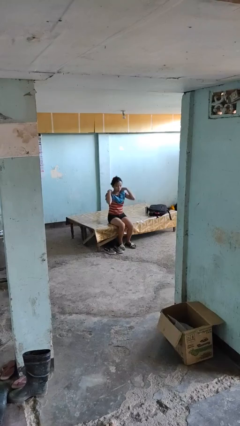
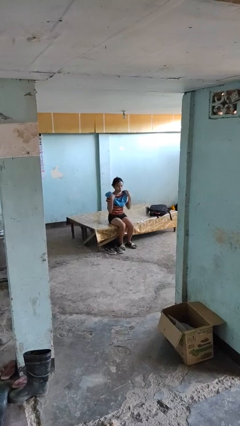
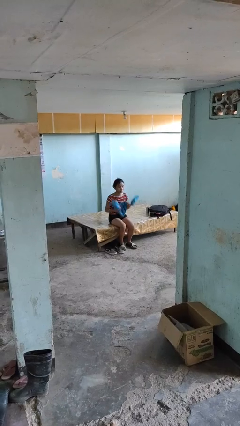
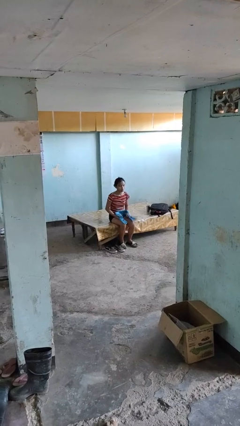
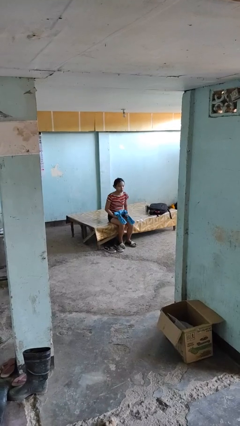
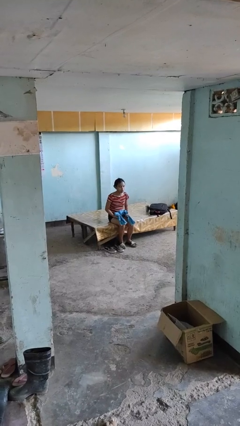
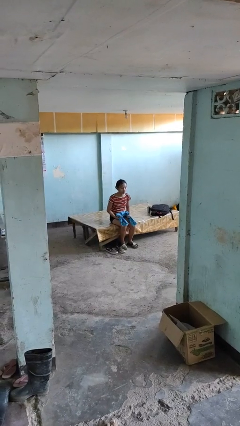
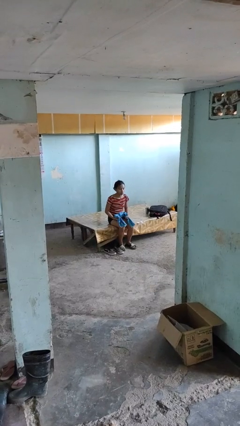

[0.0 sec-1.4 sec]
person takes off scarf

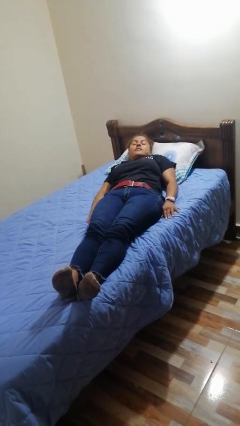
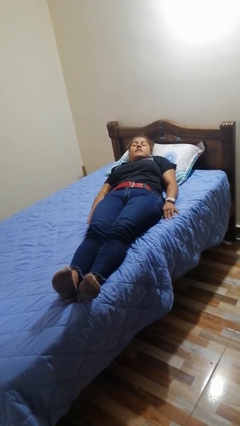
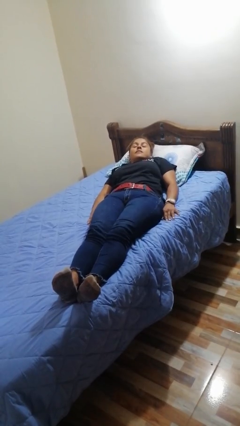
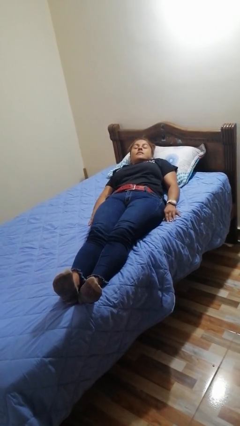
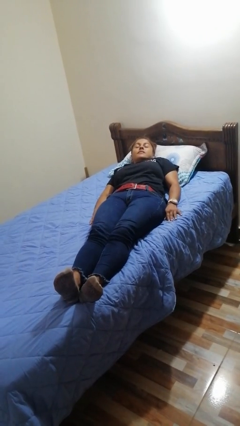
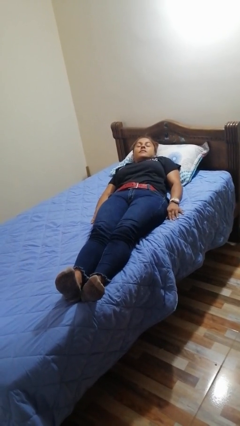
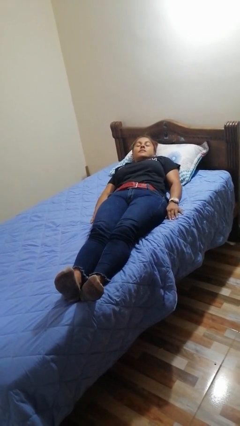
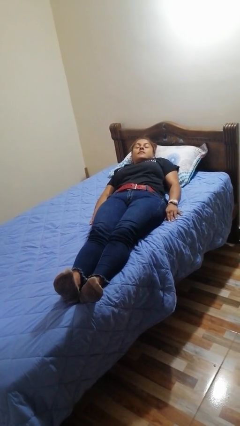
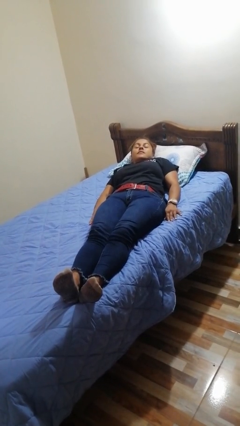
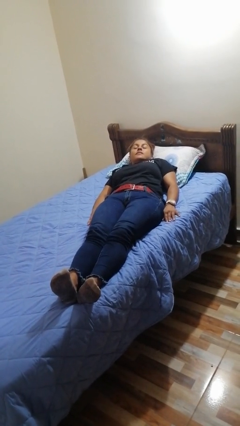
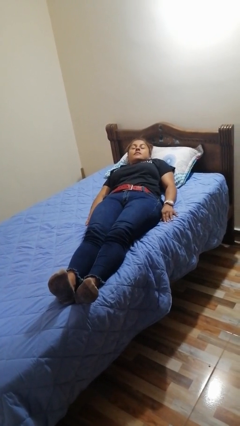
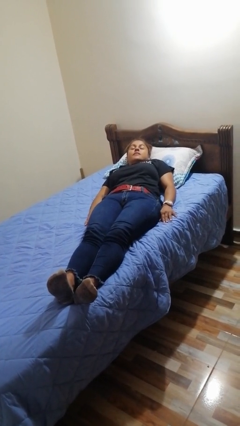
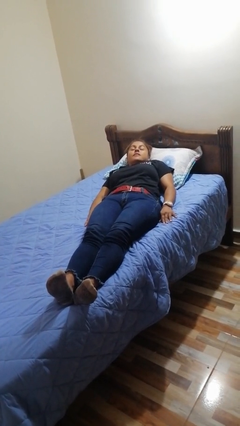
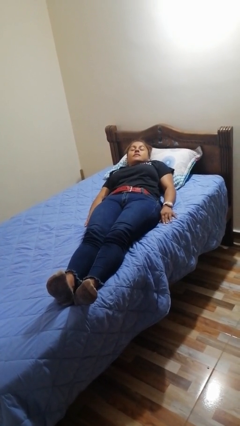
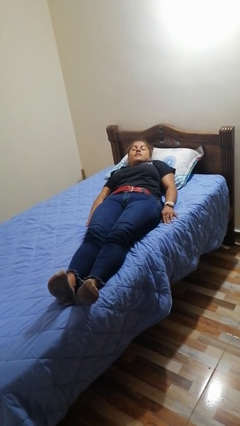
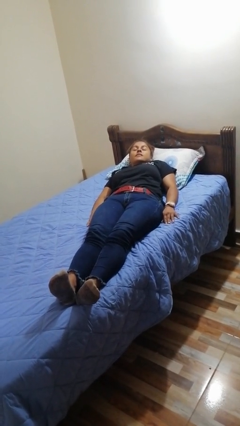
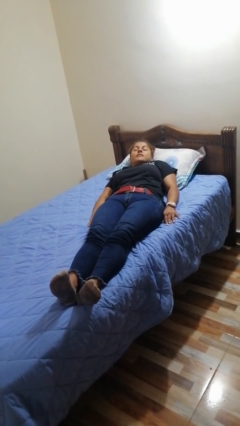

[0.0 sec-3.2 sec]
person stands up

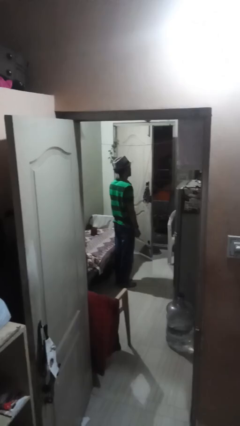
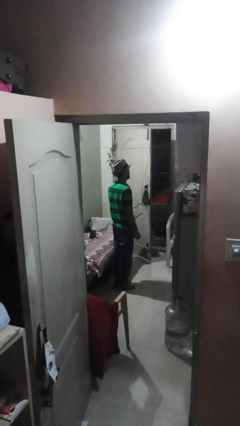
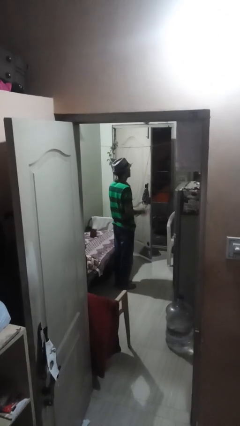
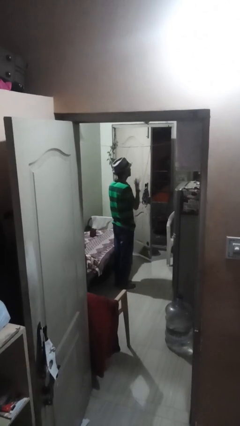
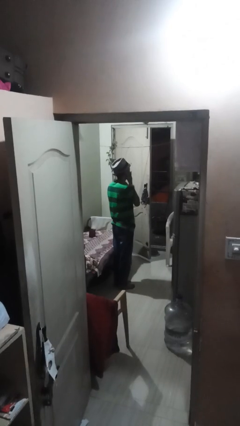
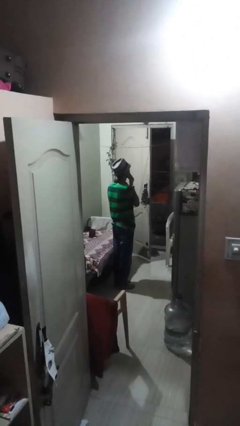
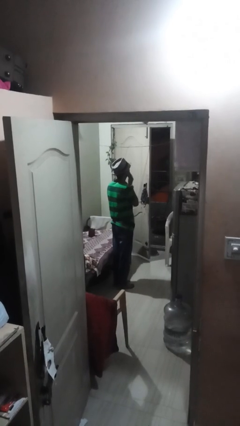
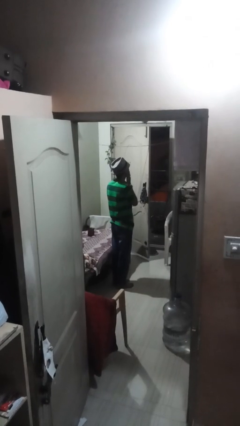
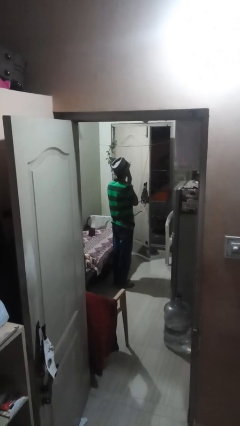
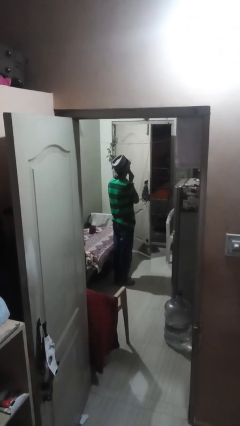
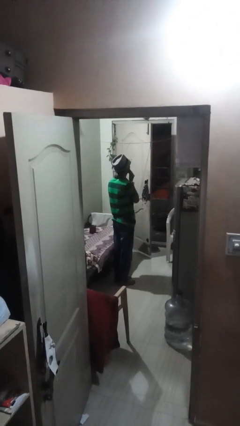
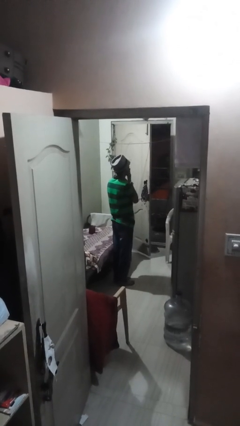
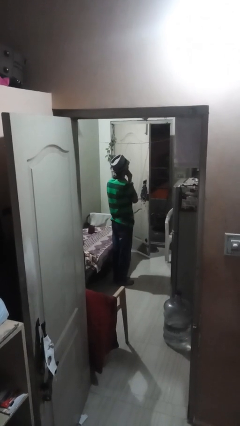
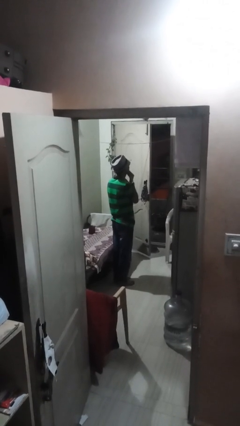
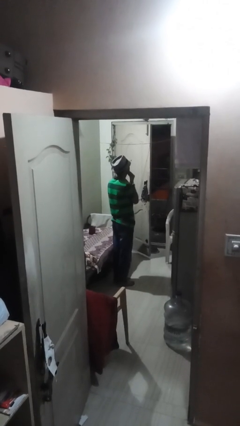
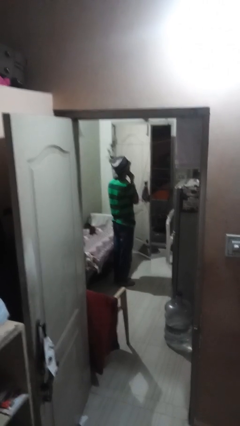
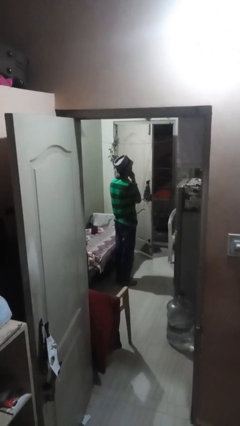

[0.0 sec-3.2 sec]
person strokes chin

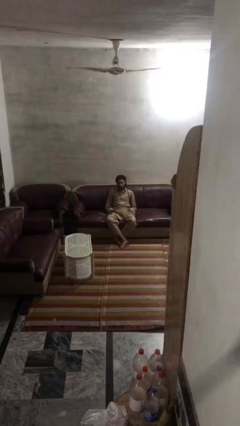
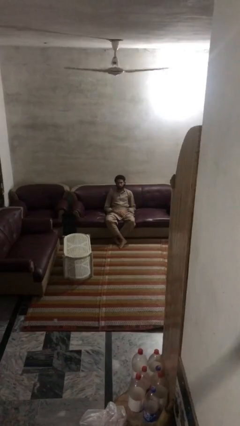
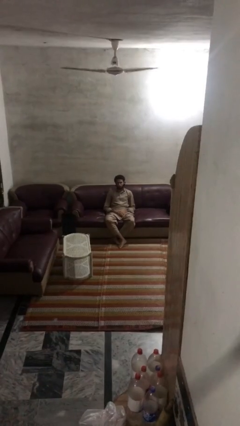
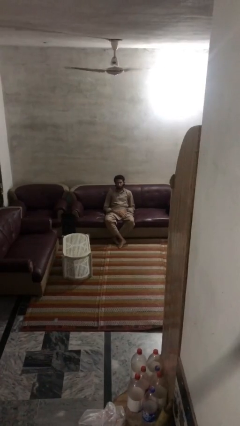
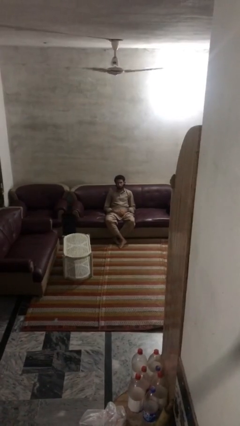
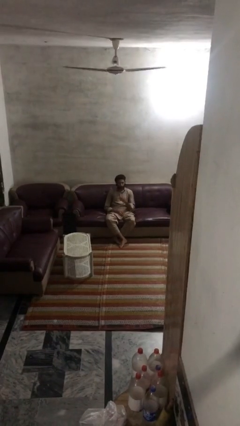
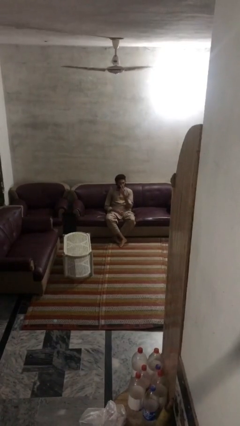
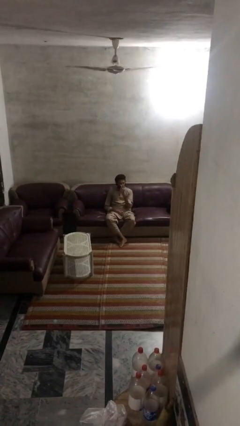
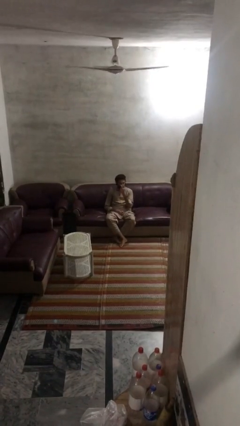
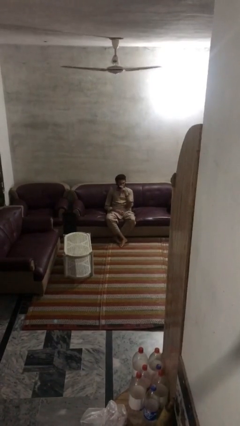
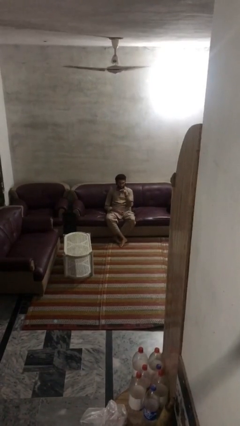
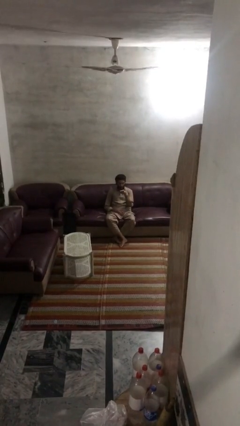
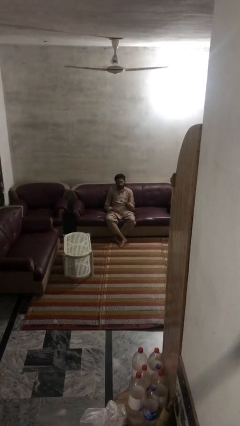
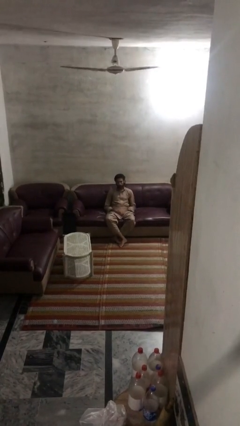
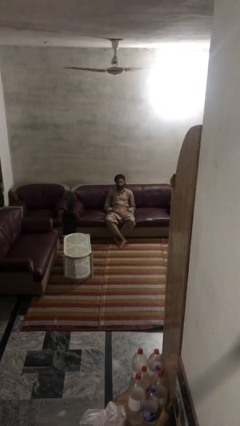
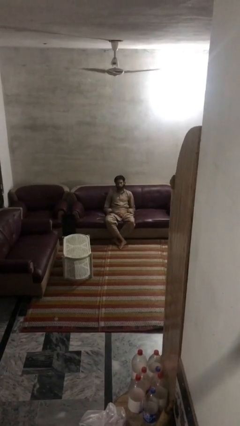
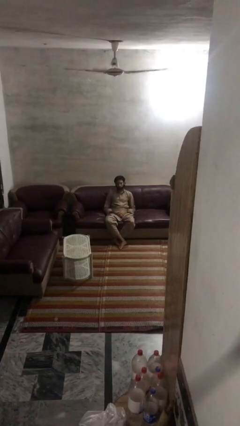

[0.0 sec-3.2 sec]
person gestures watch closely

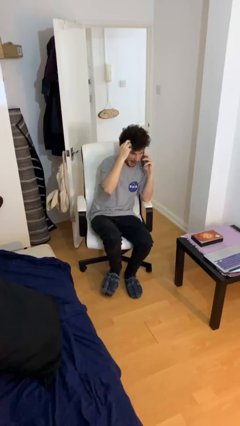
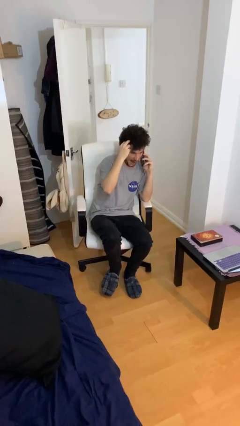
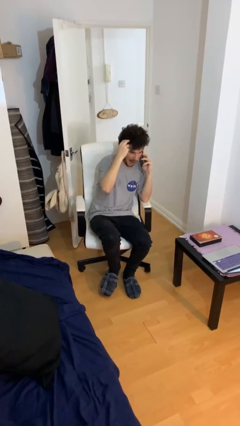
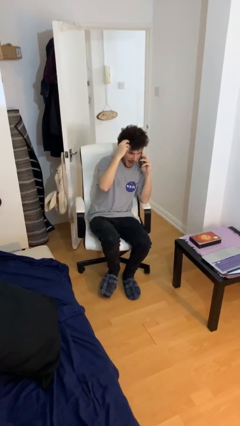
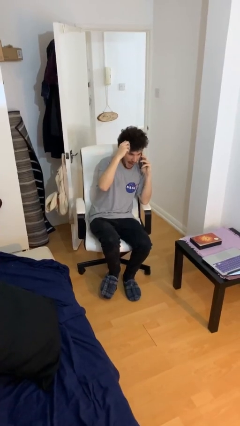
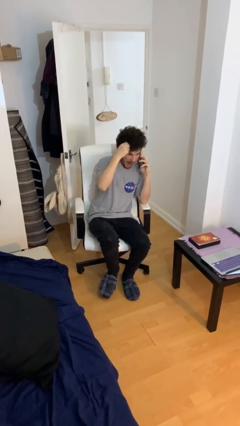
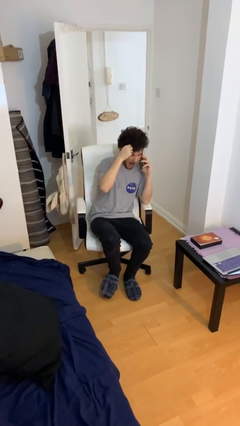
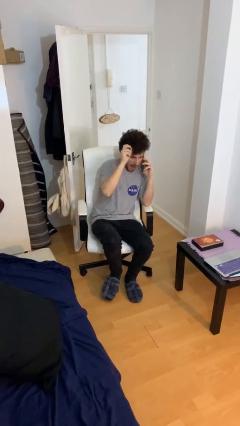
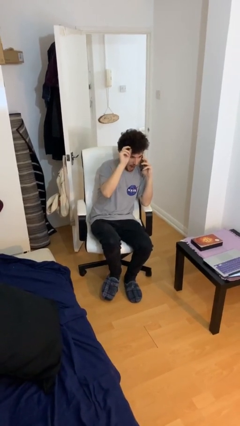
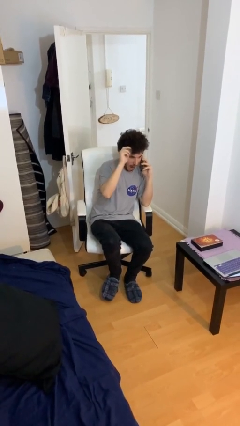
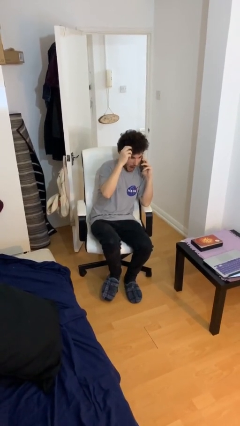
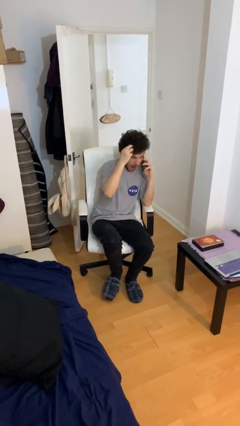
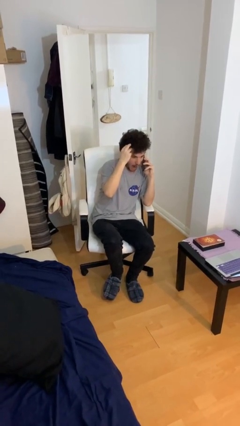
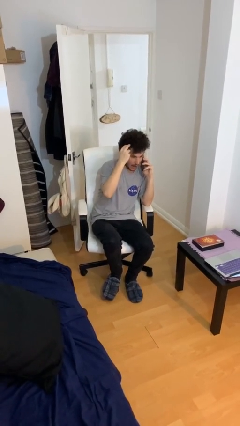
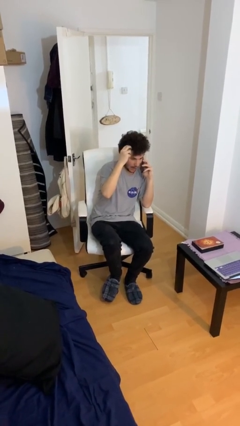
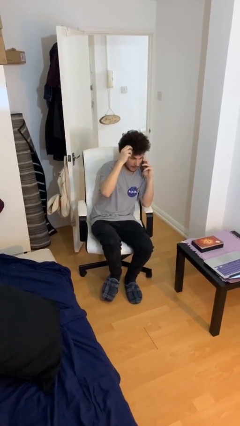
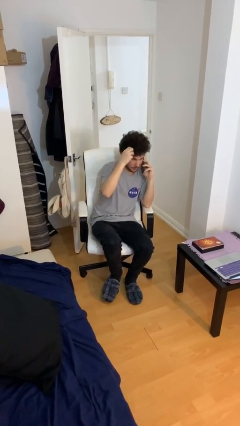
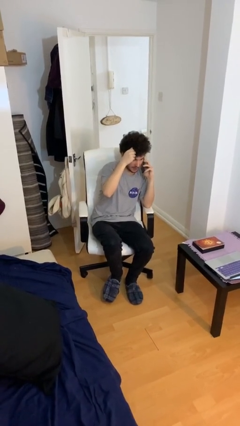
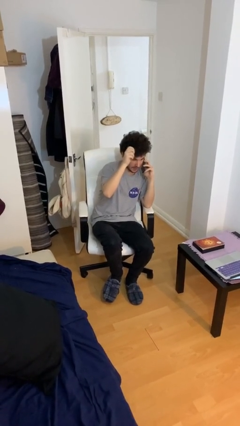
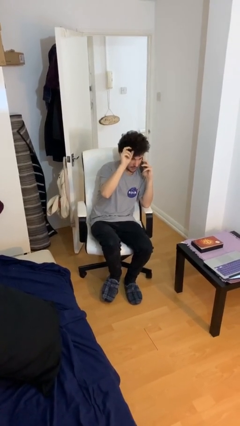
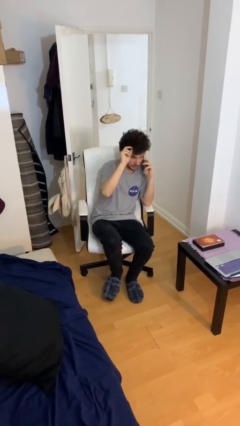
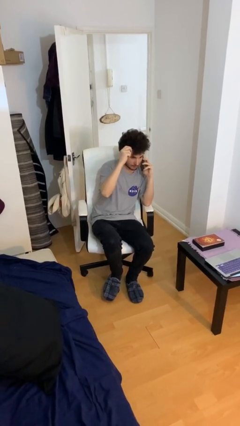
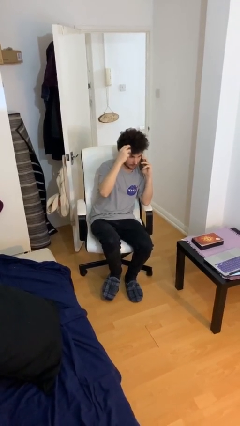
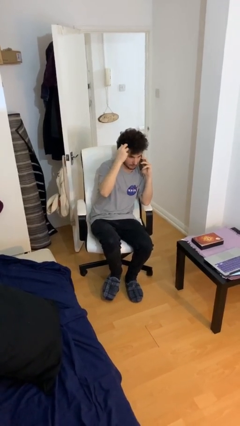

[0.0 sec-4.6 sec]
person talks on phone

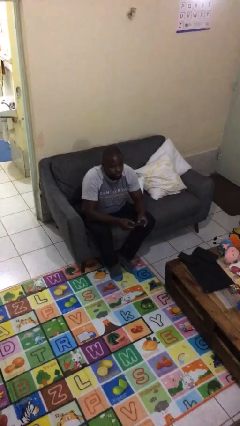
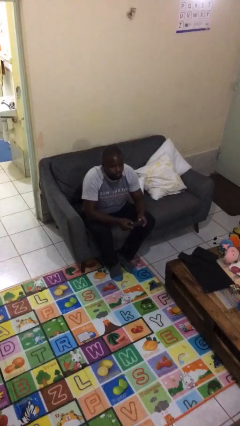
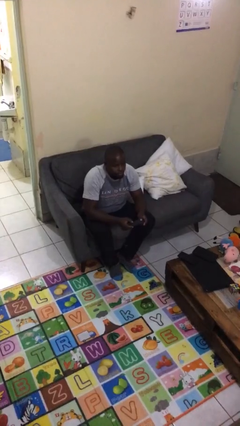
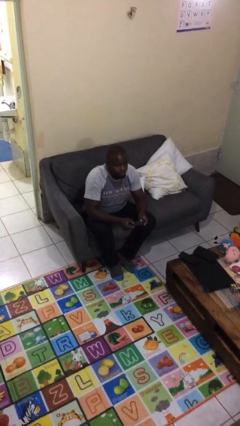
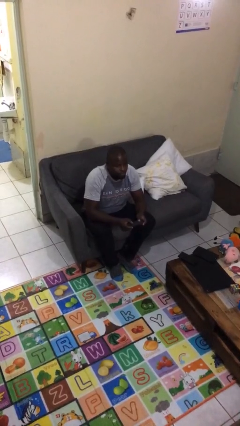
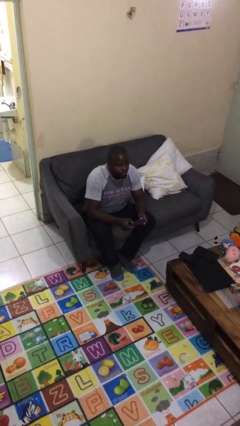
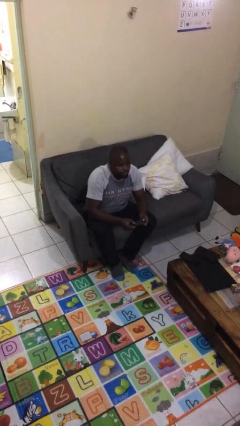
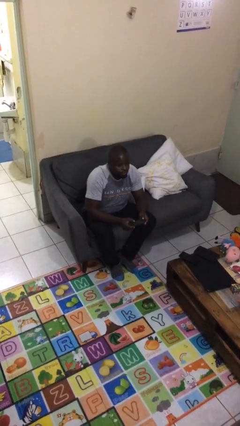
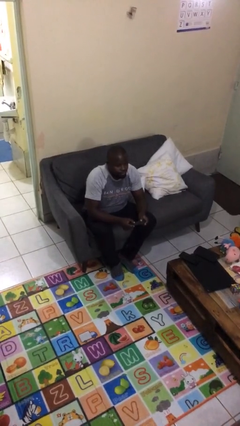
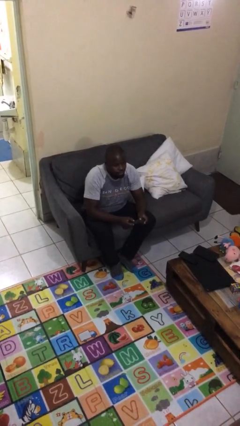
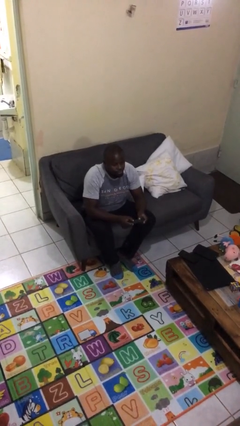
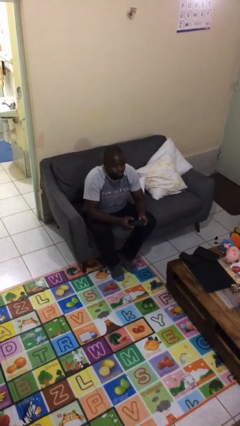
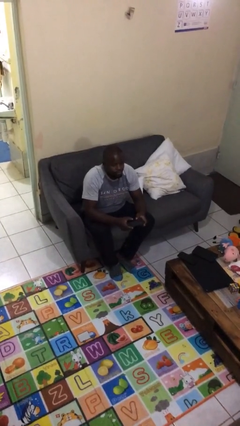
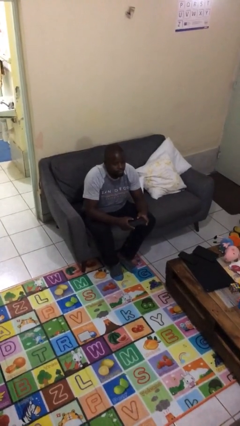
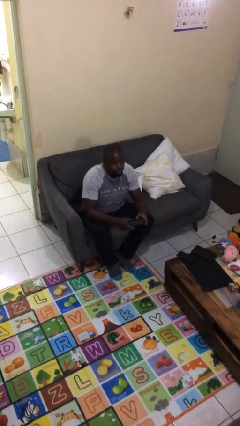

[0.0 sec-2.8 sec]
person interacts with handheld game
